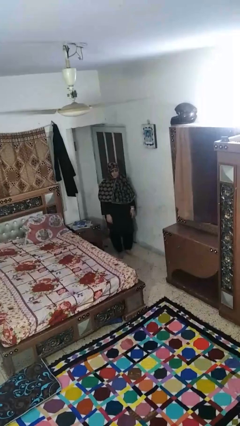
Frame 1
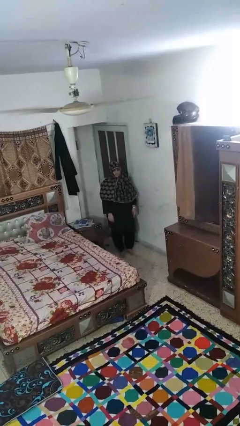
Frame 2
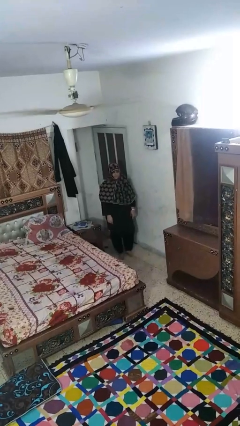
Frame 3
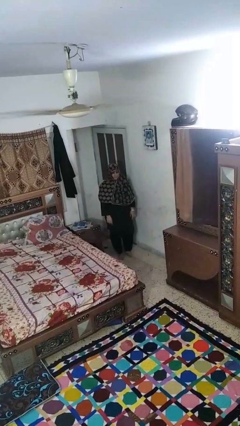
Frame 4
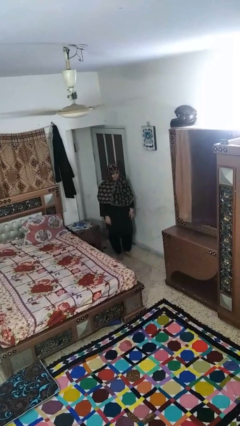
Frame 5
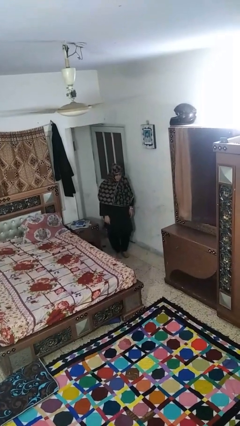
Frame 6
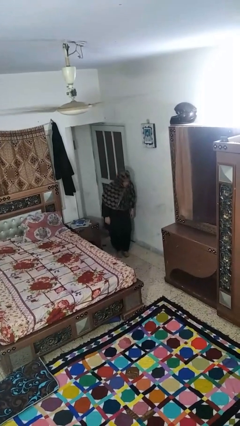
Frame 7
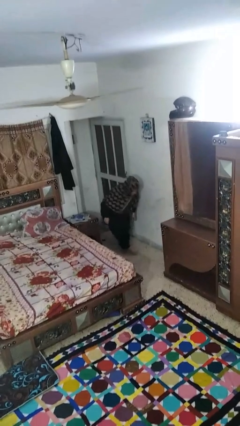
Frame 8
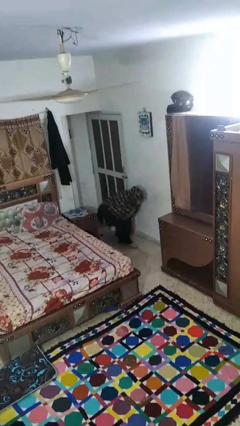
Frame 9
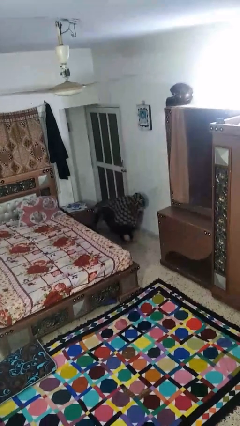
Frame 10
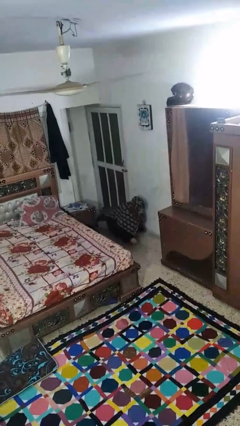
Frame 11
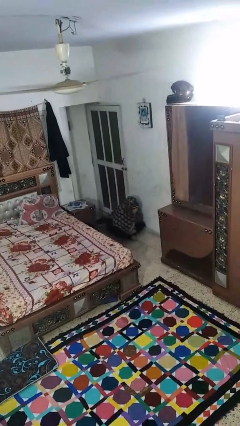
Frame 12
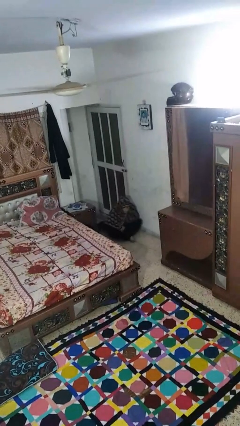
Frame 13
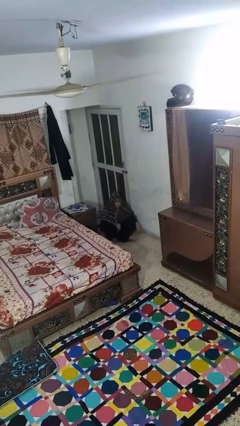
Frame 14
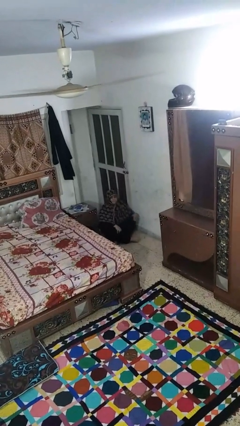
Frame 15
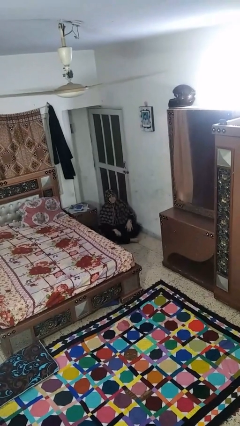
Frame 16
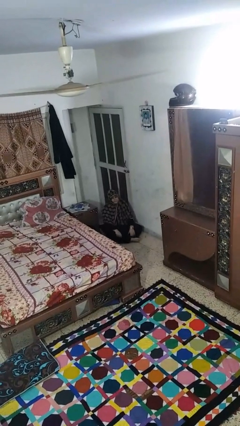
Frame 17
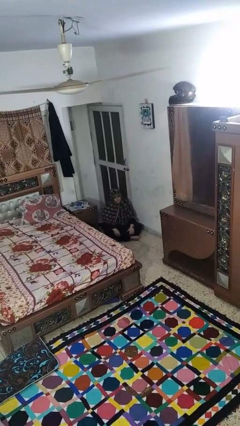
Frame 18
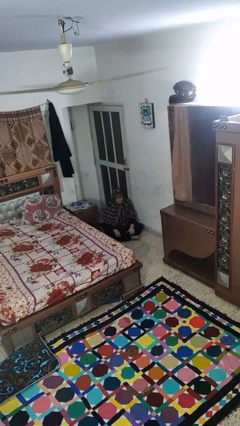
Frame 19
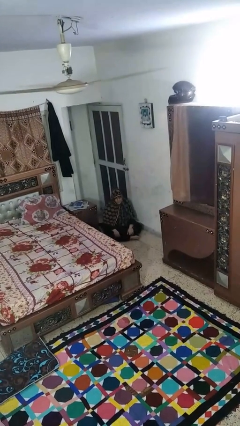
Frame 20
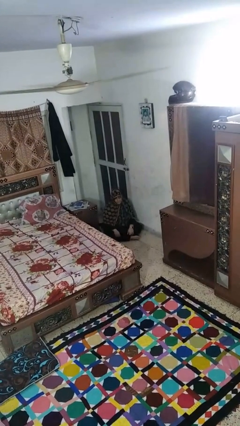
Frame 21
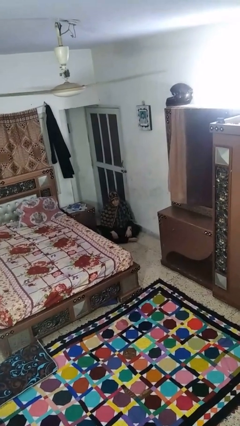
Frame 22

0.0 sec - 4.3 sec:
person sits crisscross

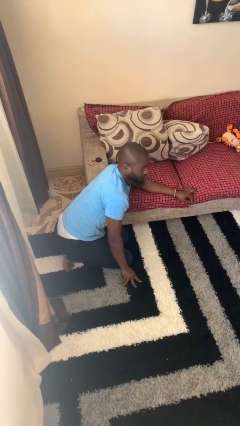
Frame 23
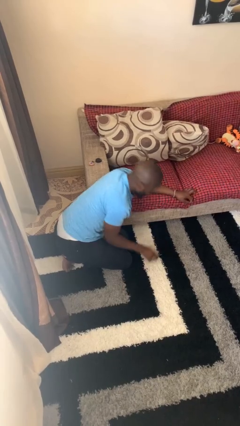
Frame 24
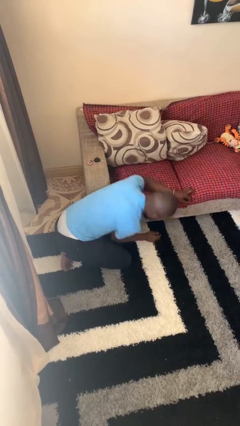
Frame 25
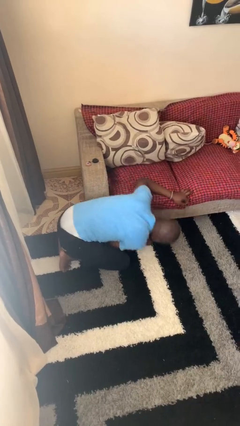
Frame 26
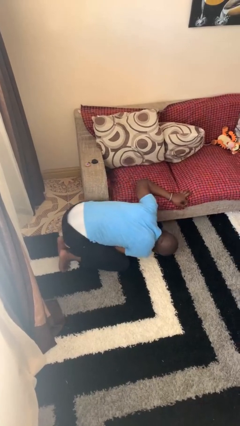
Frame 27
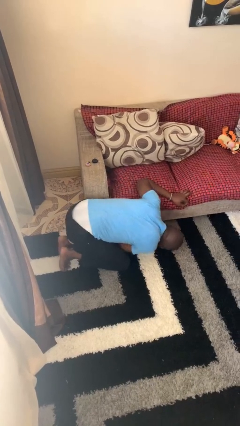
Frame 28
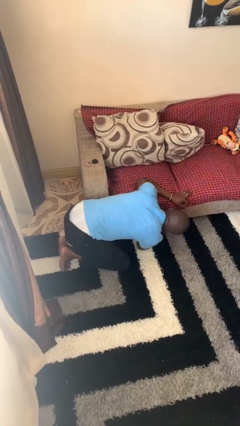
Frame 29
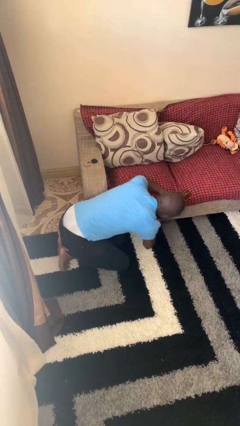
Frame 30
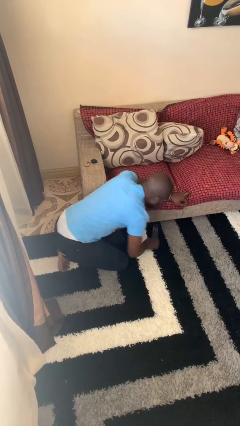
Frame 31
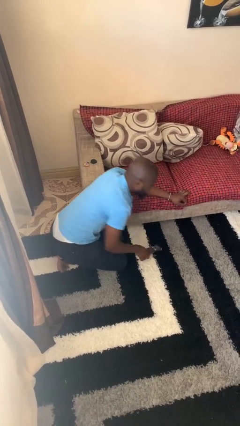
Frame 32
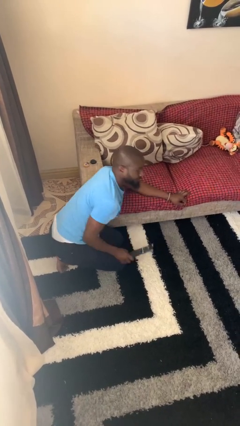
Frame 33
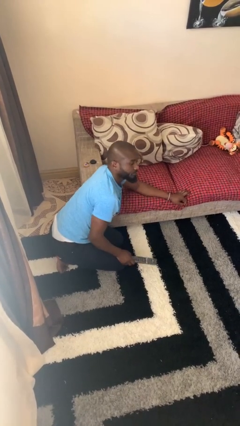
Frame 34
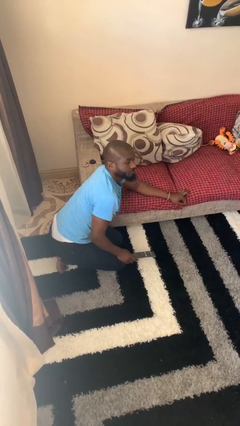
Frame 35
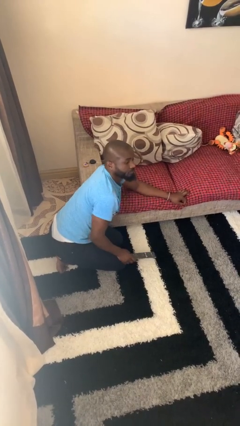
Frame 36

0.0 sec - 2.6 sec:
person searches under couch

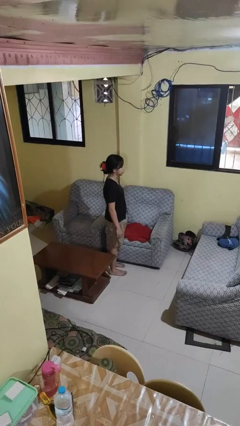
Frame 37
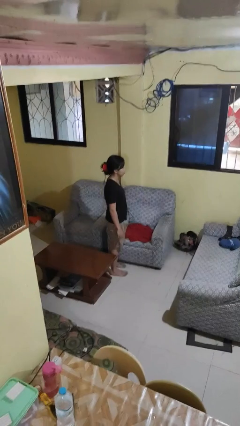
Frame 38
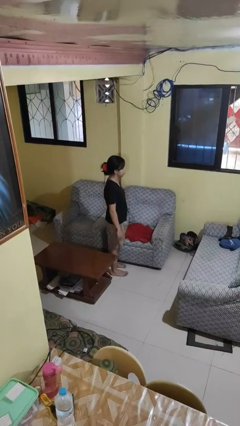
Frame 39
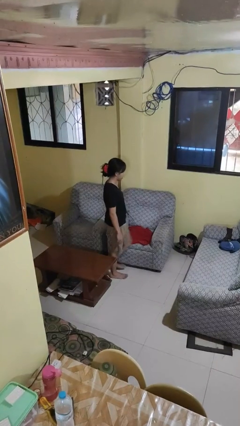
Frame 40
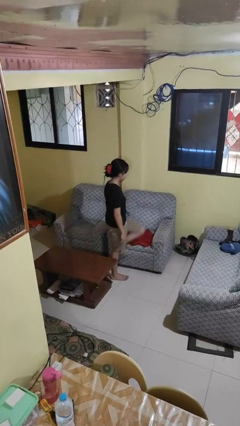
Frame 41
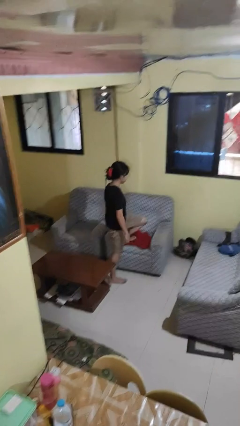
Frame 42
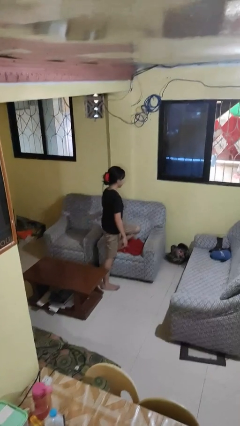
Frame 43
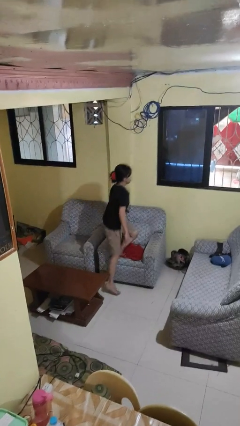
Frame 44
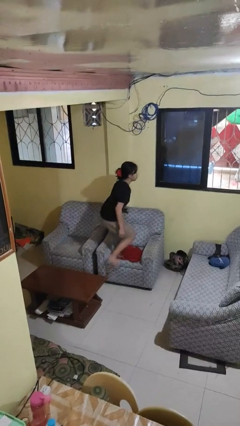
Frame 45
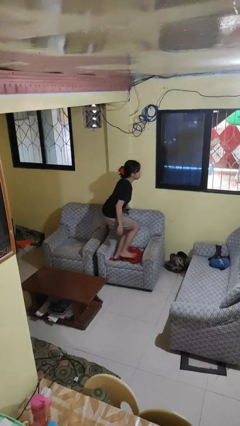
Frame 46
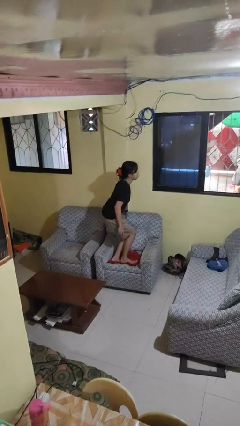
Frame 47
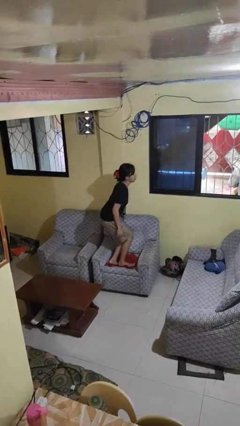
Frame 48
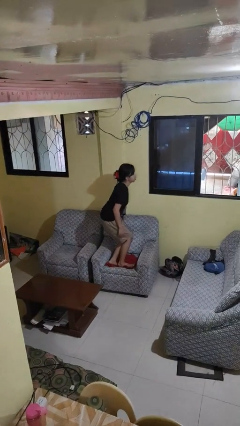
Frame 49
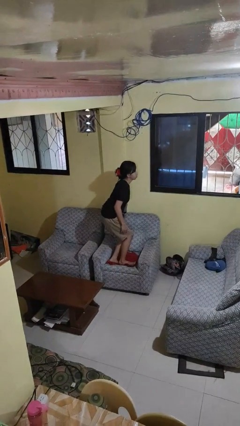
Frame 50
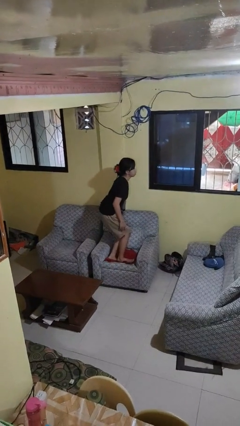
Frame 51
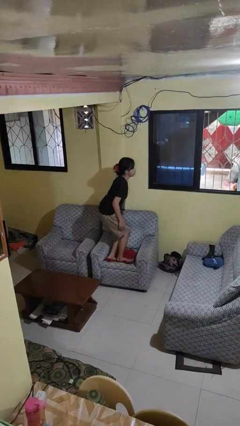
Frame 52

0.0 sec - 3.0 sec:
person climbs on couch

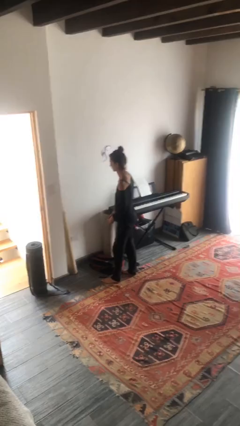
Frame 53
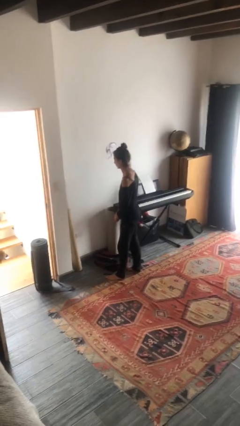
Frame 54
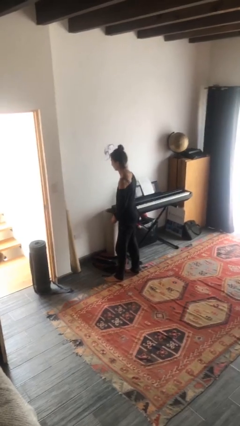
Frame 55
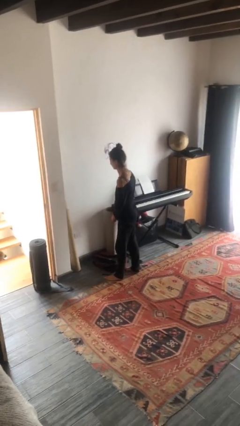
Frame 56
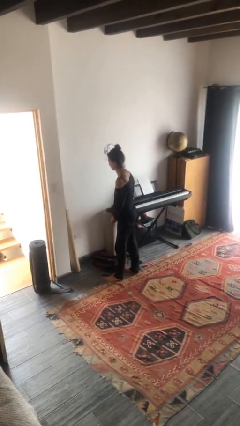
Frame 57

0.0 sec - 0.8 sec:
person unplugs from electrical socket

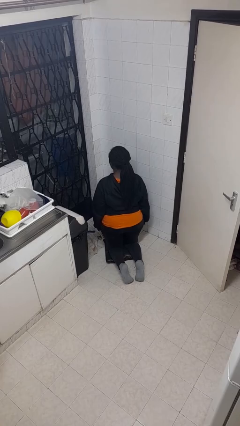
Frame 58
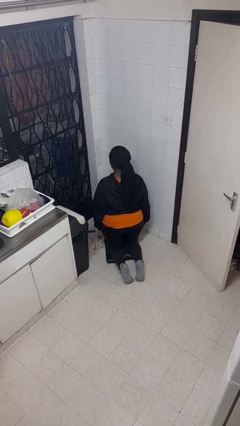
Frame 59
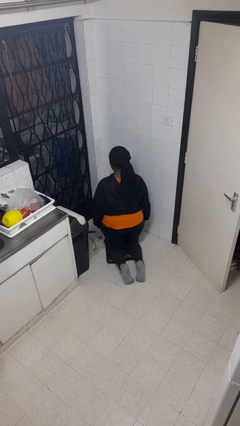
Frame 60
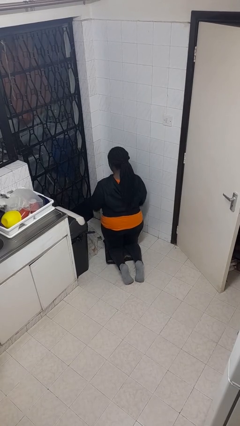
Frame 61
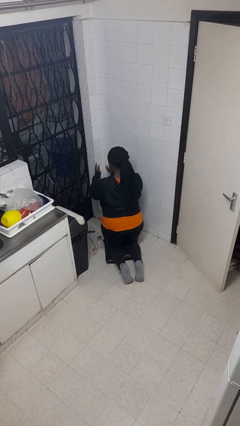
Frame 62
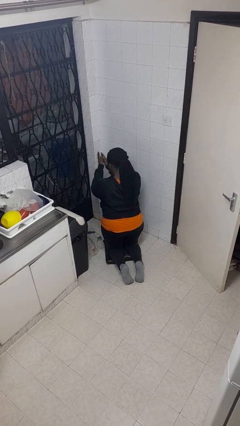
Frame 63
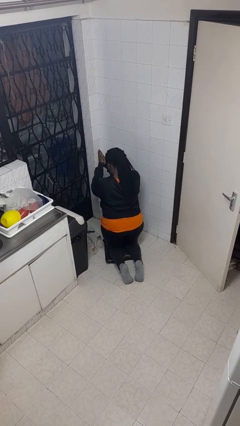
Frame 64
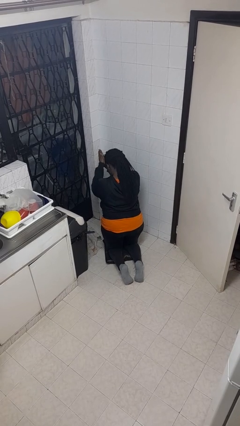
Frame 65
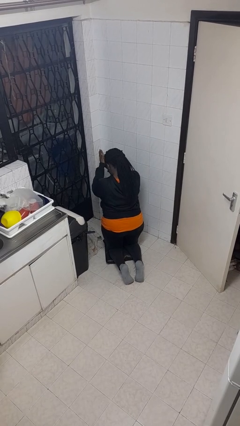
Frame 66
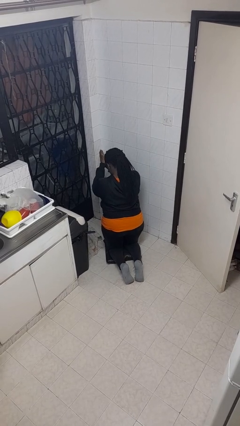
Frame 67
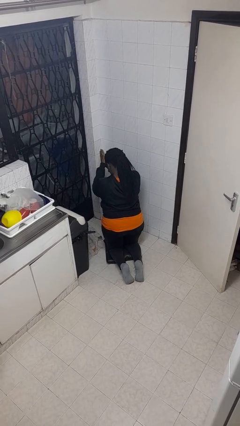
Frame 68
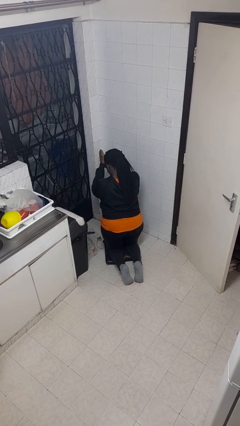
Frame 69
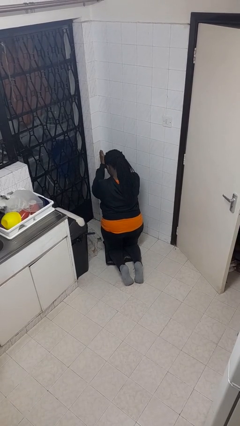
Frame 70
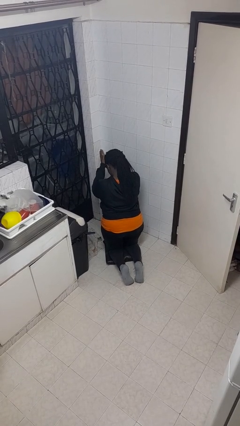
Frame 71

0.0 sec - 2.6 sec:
person prays

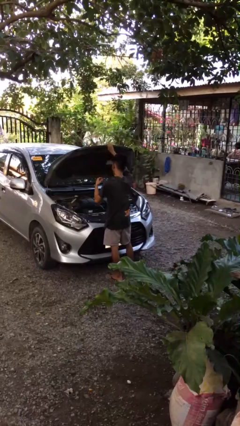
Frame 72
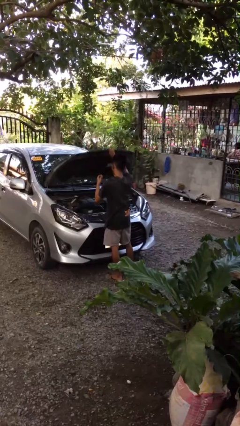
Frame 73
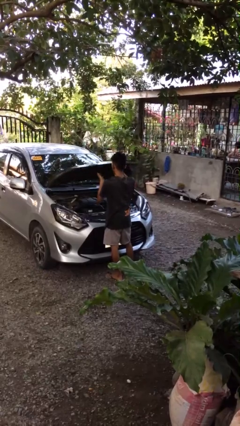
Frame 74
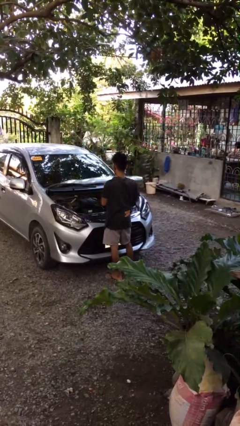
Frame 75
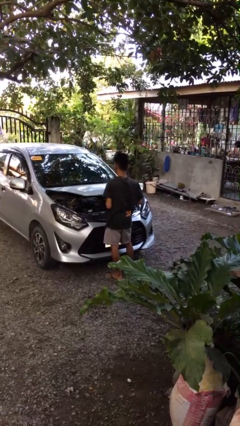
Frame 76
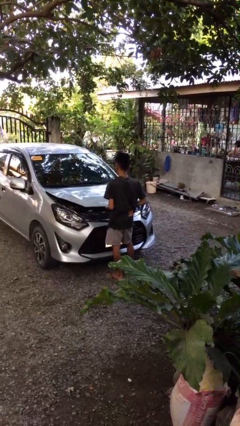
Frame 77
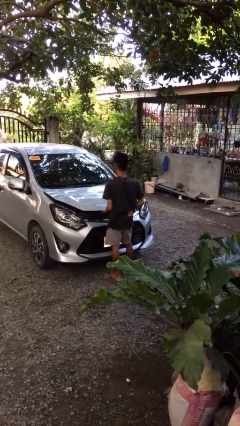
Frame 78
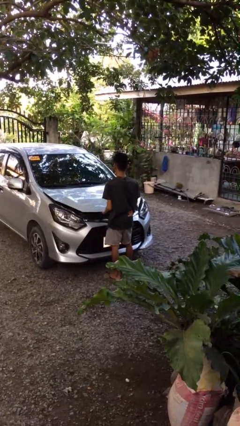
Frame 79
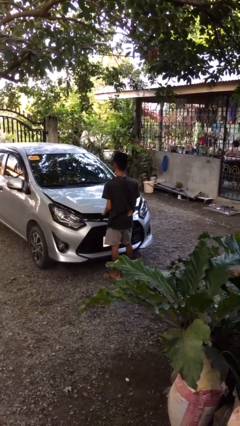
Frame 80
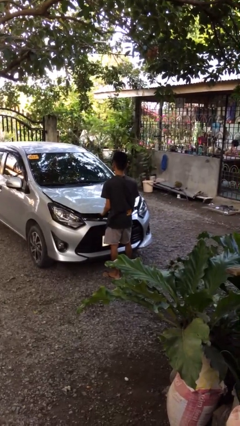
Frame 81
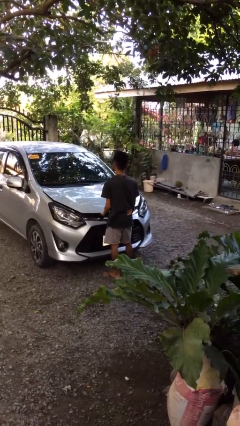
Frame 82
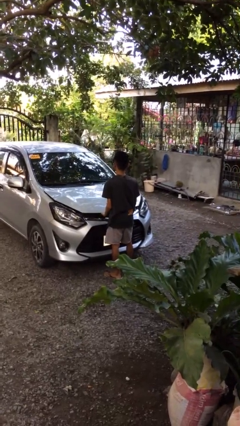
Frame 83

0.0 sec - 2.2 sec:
person closes car hood

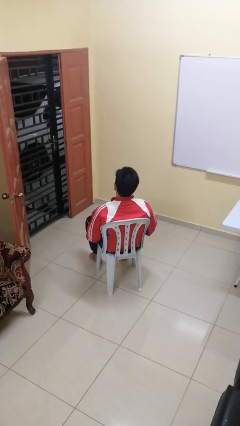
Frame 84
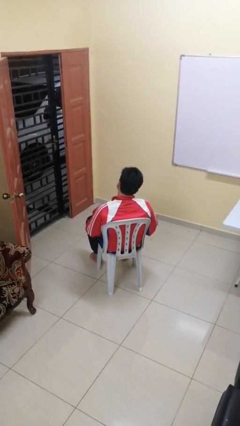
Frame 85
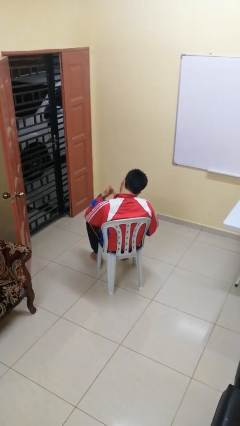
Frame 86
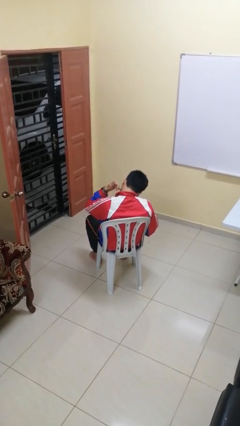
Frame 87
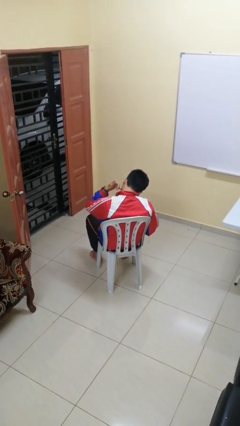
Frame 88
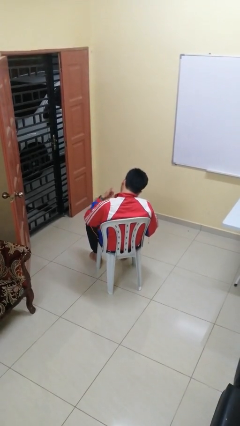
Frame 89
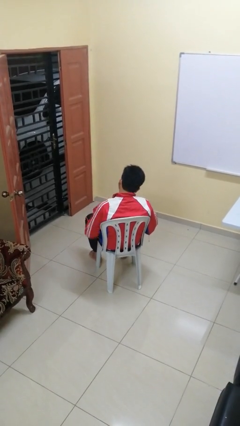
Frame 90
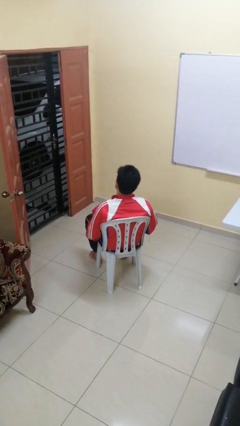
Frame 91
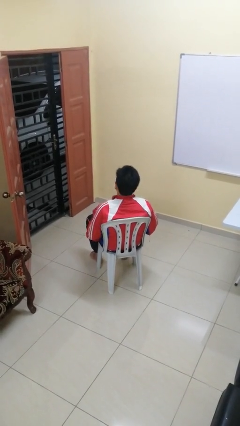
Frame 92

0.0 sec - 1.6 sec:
person gestures call me

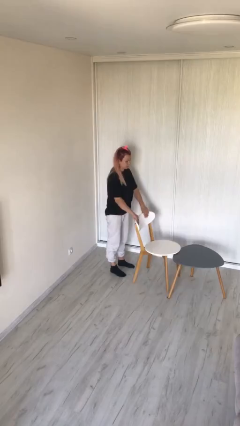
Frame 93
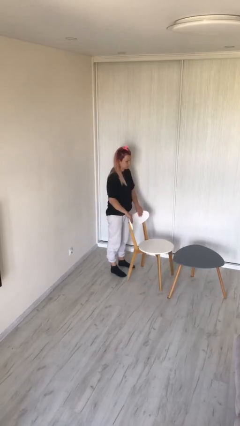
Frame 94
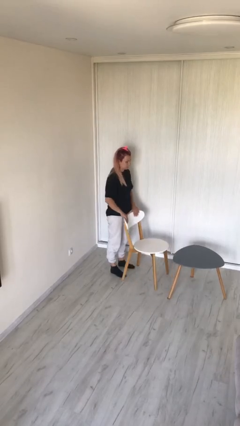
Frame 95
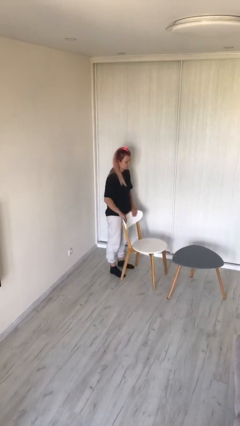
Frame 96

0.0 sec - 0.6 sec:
person pulls out chair
